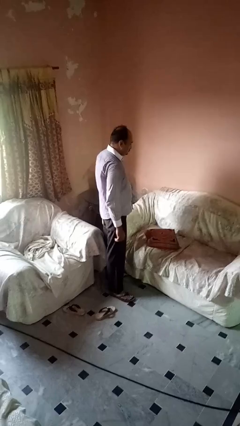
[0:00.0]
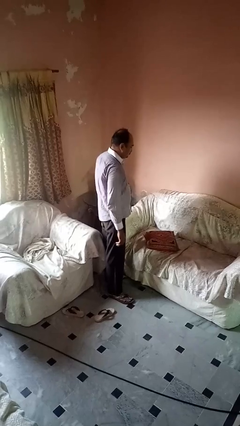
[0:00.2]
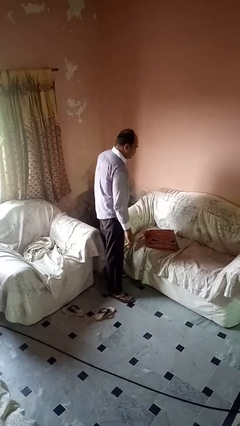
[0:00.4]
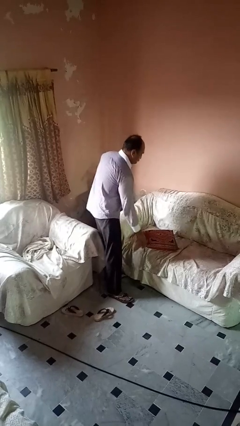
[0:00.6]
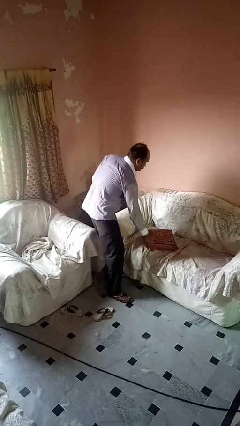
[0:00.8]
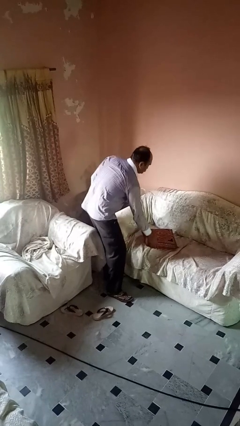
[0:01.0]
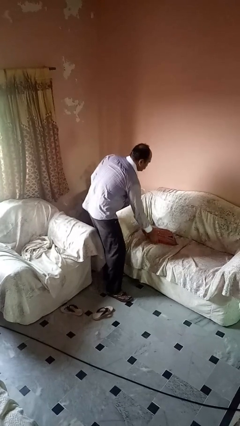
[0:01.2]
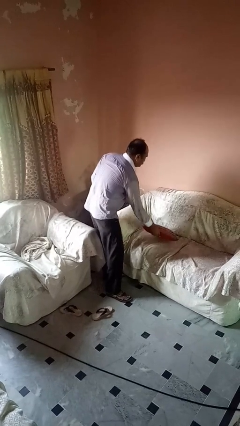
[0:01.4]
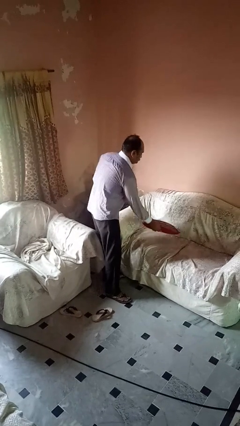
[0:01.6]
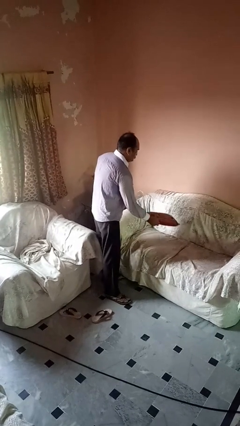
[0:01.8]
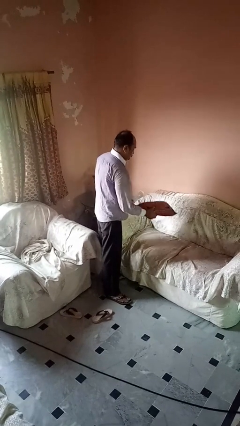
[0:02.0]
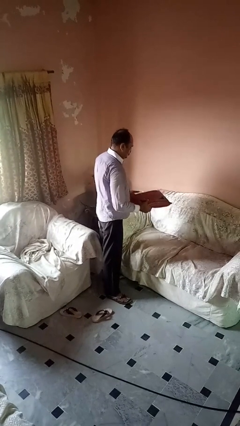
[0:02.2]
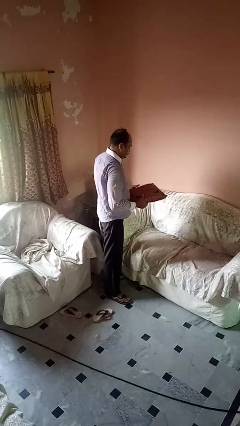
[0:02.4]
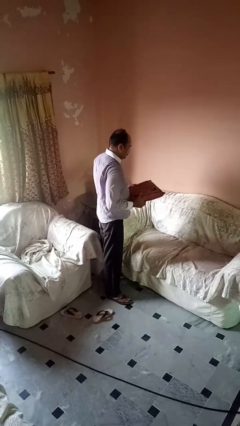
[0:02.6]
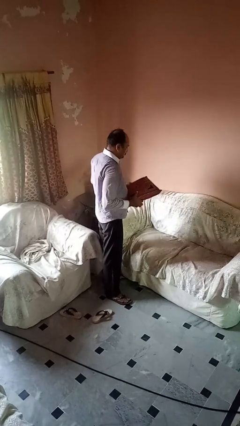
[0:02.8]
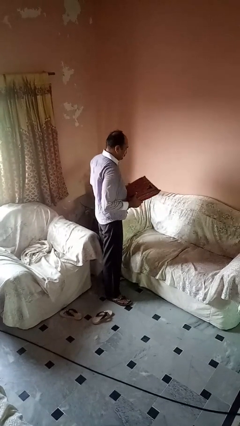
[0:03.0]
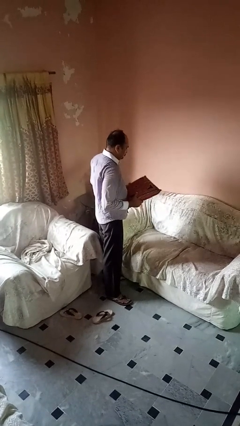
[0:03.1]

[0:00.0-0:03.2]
person picks up object from couch

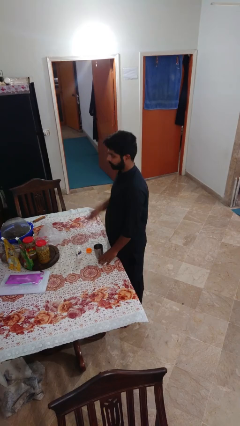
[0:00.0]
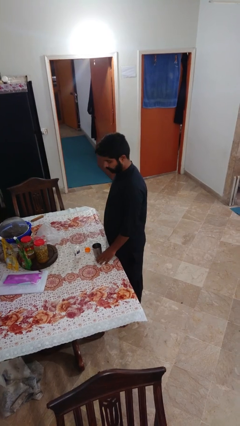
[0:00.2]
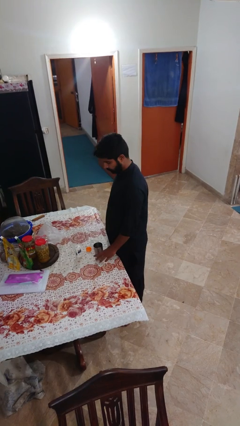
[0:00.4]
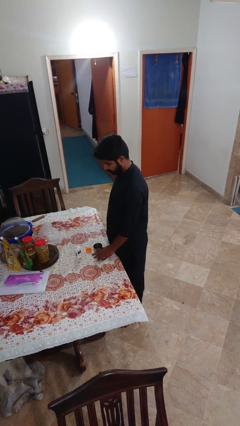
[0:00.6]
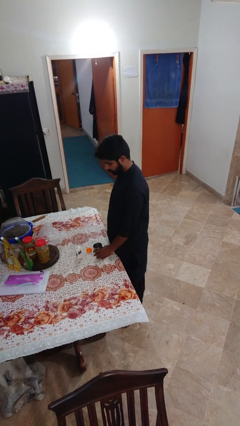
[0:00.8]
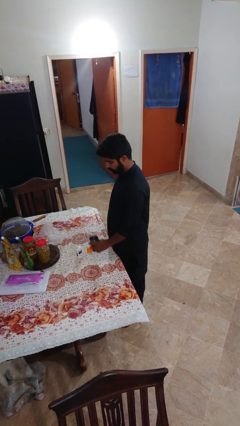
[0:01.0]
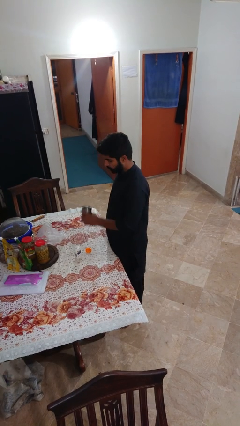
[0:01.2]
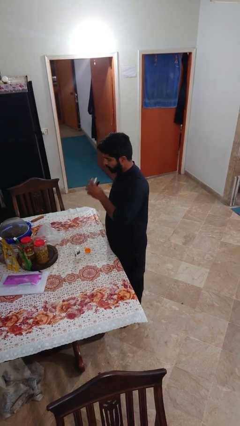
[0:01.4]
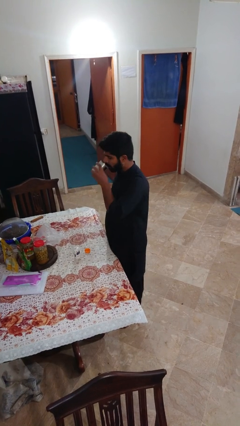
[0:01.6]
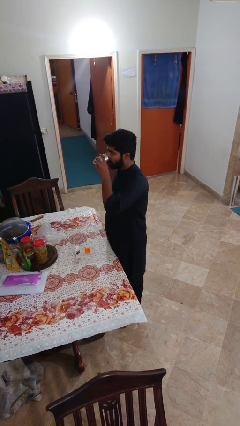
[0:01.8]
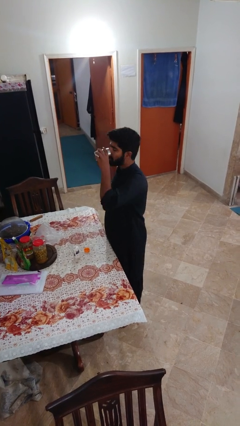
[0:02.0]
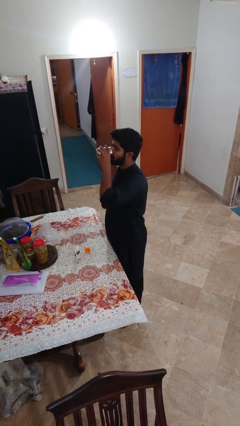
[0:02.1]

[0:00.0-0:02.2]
person drinks from cup

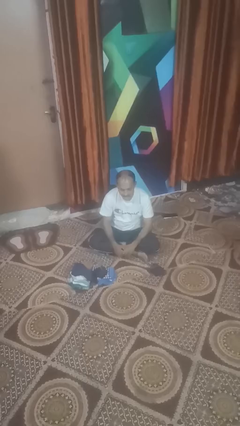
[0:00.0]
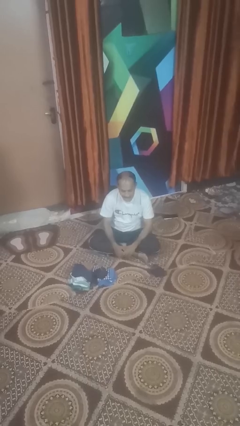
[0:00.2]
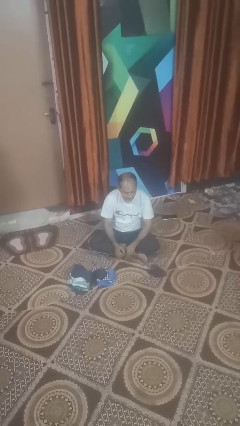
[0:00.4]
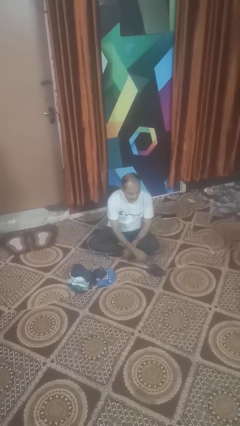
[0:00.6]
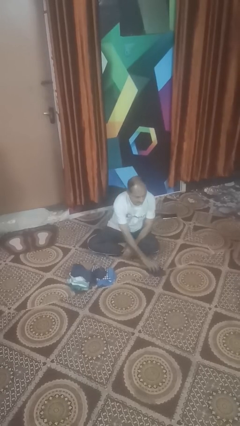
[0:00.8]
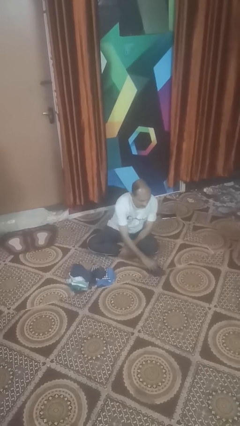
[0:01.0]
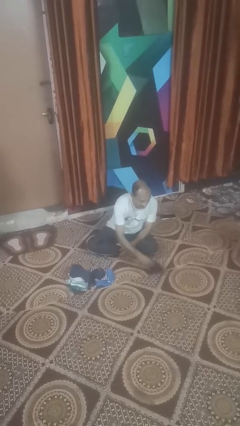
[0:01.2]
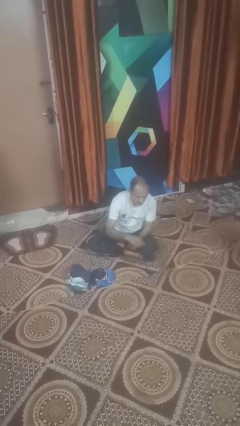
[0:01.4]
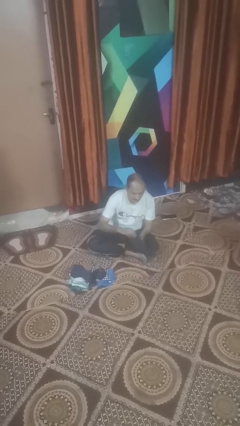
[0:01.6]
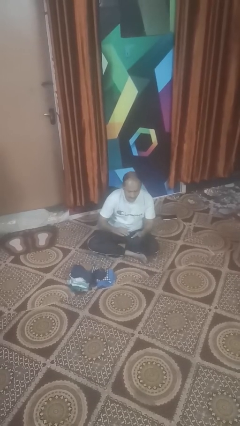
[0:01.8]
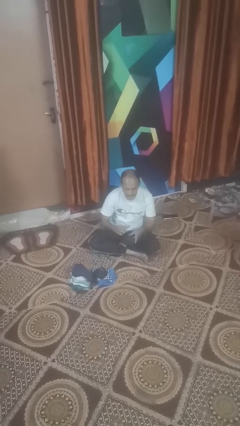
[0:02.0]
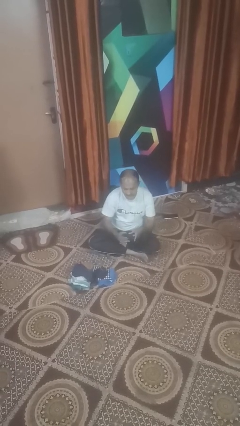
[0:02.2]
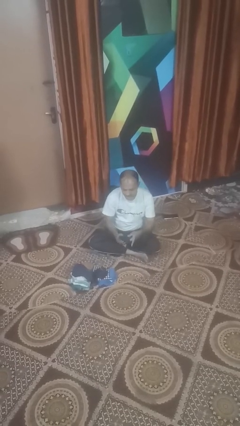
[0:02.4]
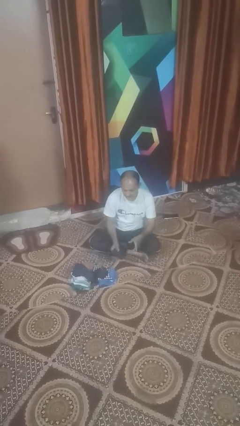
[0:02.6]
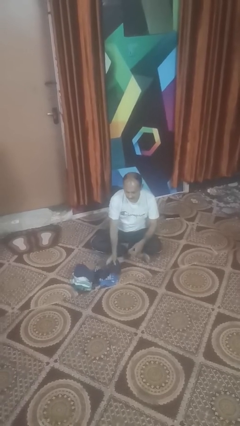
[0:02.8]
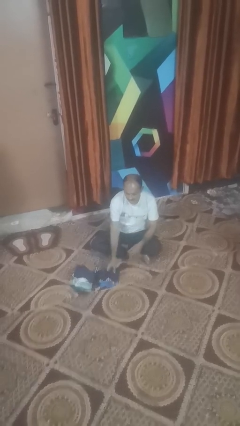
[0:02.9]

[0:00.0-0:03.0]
person folds socks

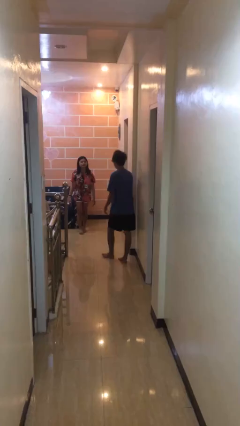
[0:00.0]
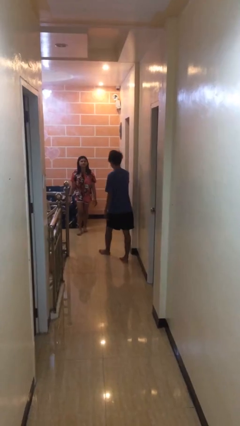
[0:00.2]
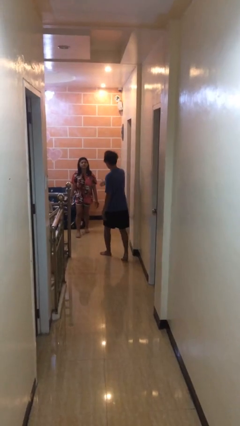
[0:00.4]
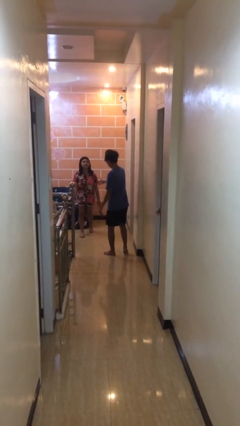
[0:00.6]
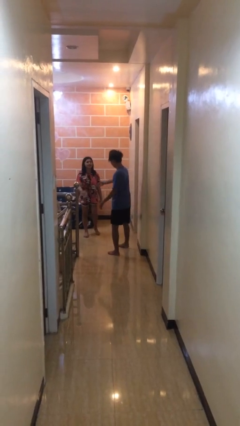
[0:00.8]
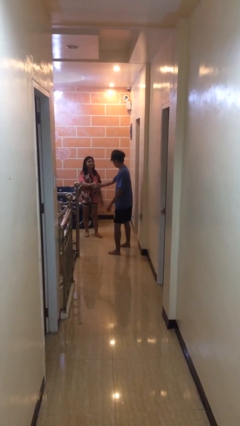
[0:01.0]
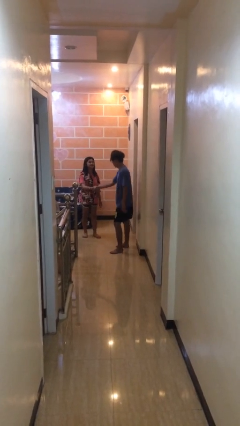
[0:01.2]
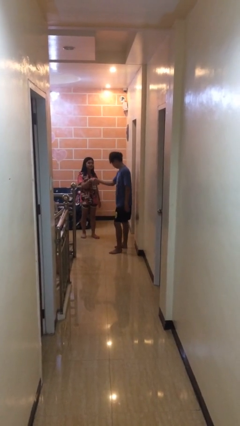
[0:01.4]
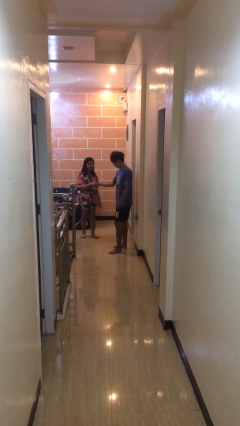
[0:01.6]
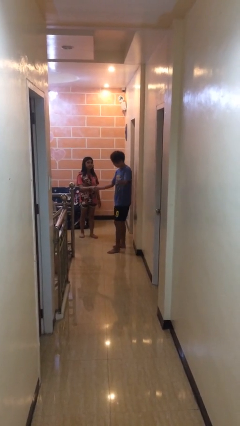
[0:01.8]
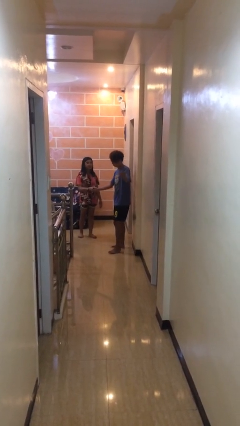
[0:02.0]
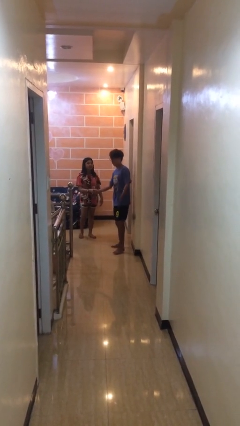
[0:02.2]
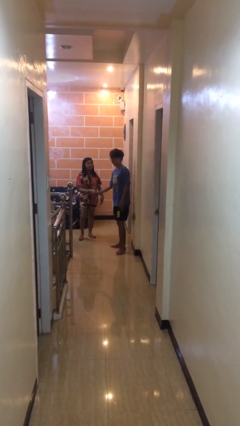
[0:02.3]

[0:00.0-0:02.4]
person shakes hand

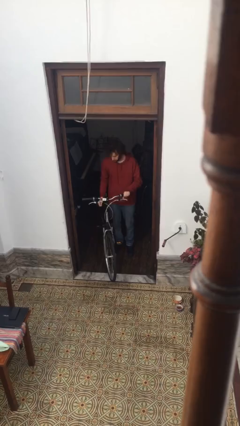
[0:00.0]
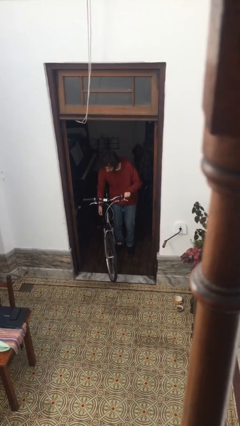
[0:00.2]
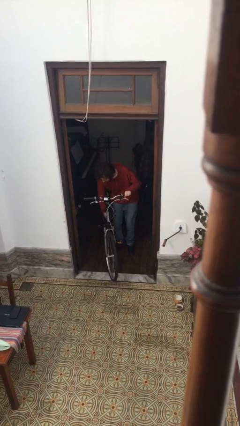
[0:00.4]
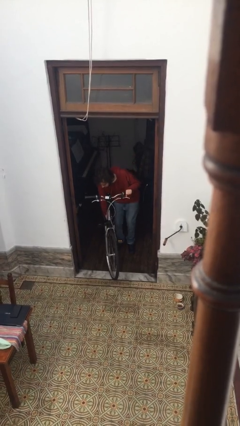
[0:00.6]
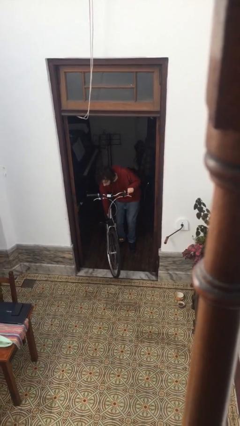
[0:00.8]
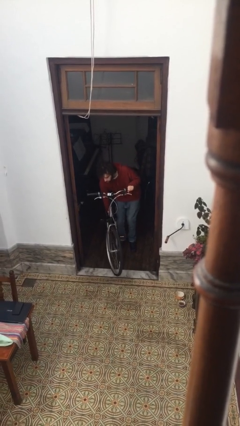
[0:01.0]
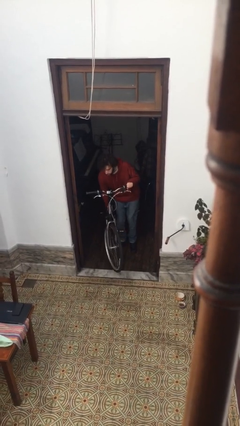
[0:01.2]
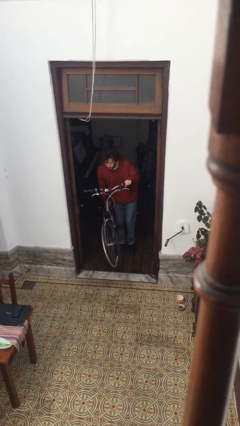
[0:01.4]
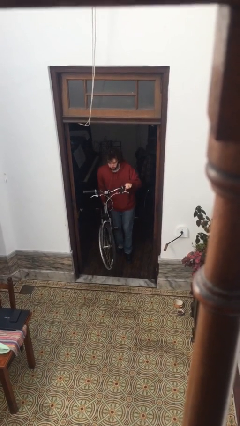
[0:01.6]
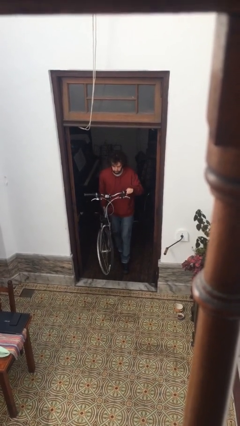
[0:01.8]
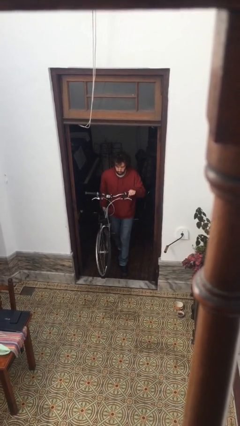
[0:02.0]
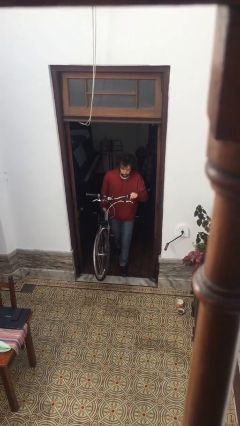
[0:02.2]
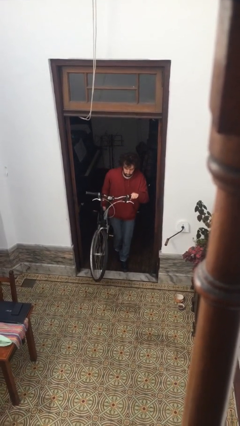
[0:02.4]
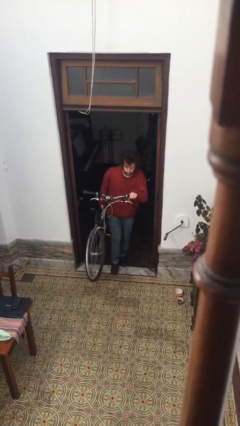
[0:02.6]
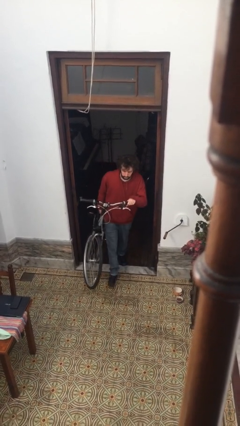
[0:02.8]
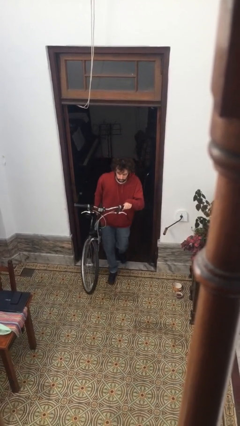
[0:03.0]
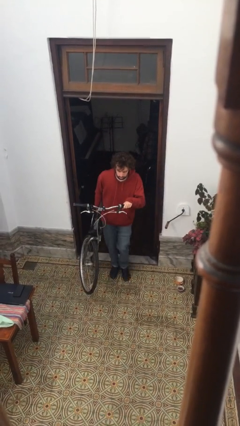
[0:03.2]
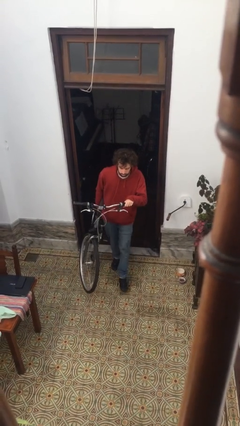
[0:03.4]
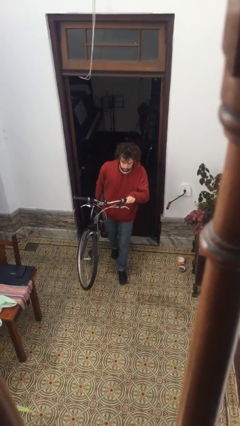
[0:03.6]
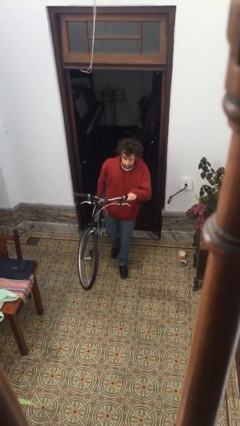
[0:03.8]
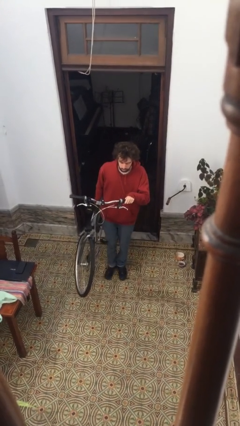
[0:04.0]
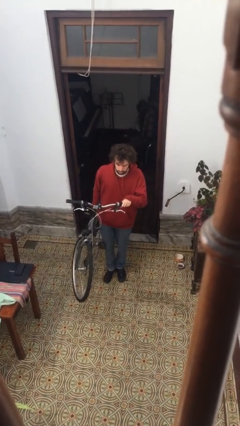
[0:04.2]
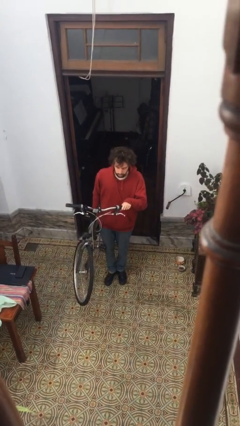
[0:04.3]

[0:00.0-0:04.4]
person carries bicycle

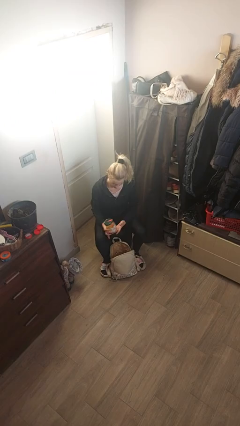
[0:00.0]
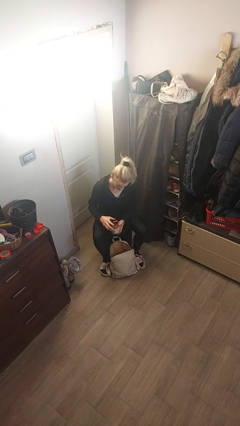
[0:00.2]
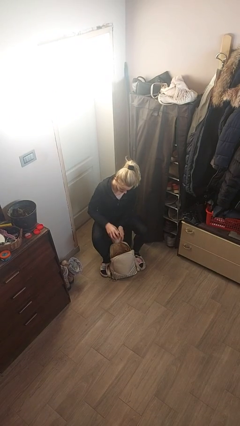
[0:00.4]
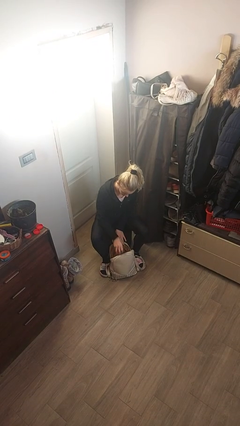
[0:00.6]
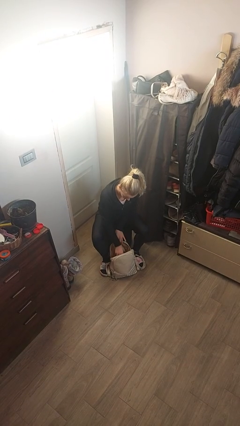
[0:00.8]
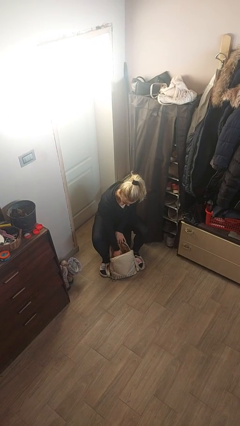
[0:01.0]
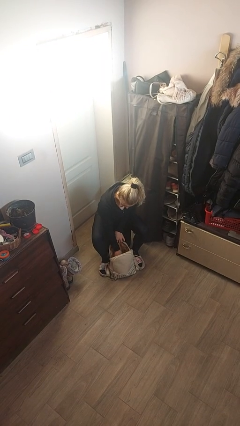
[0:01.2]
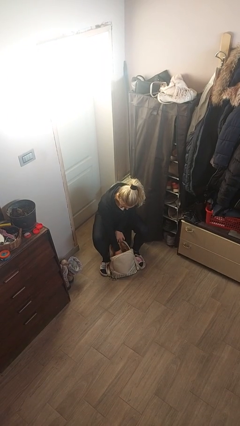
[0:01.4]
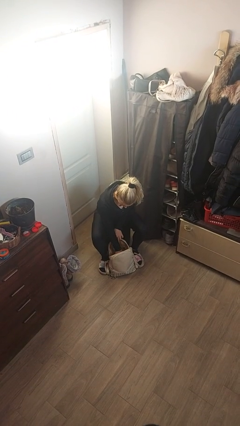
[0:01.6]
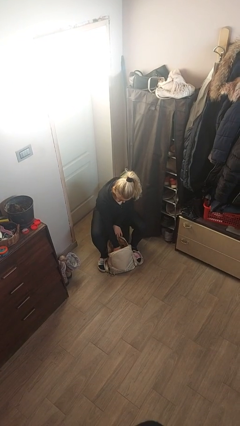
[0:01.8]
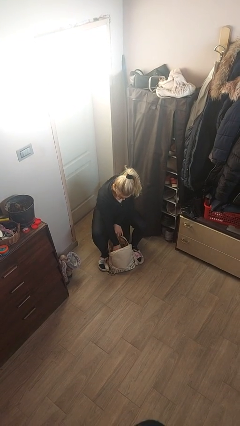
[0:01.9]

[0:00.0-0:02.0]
person puts object into backpack
